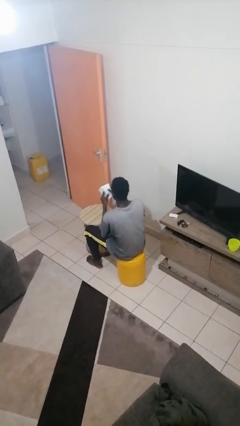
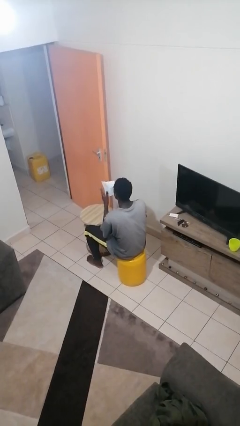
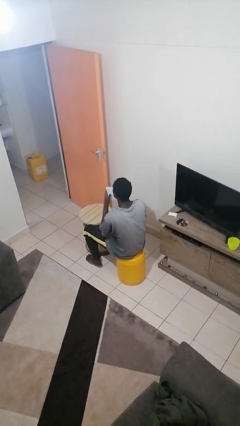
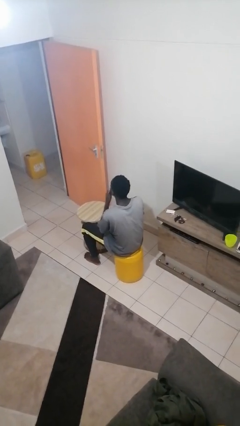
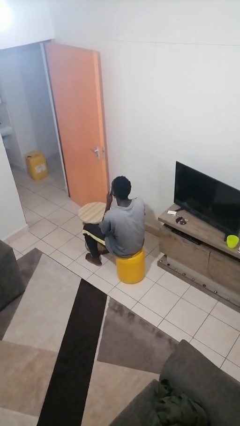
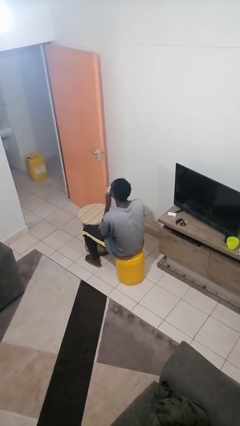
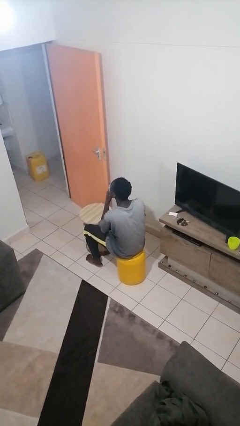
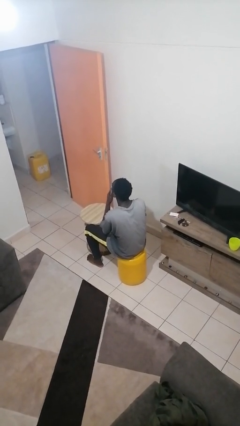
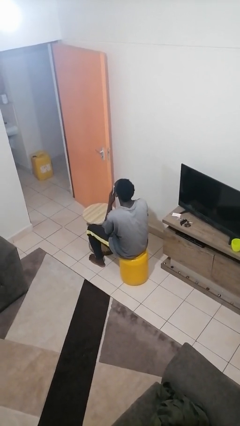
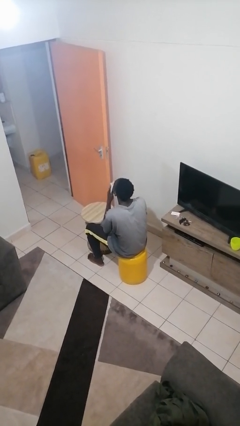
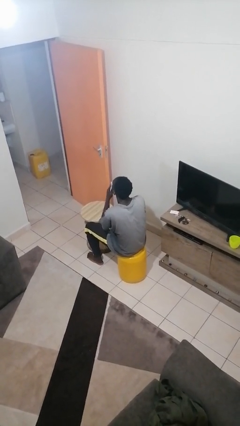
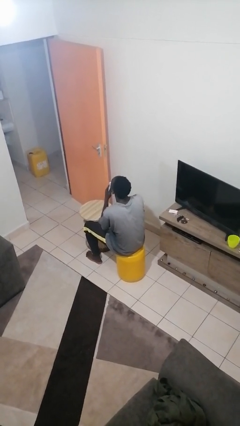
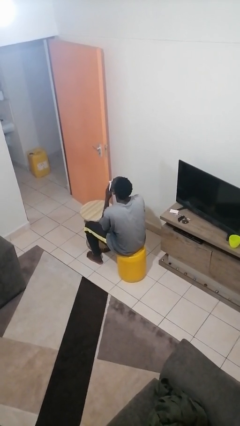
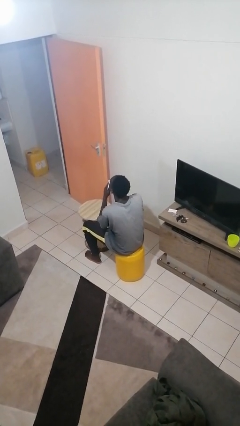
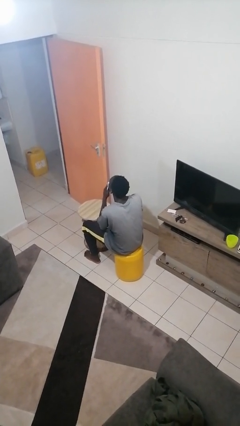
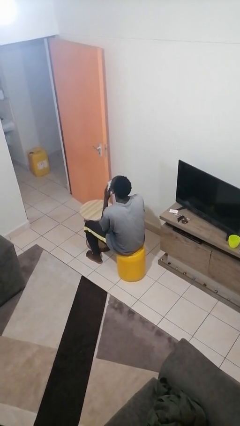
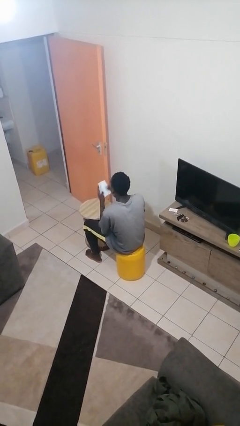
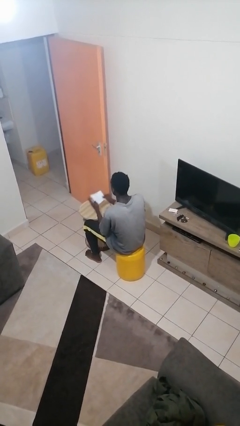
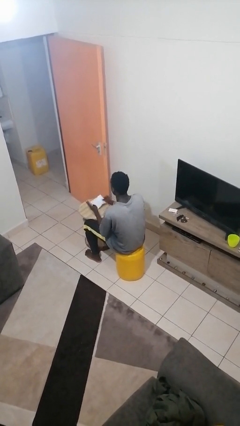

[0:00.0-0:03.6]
person wipes mouth with napkin

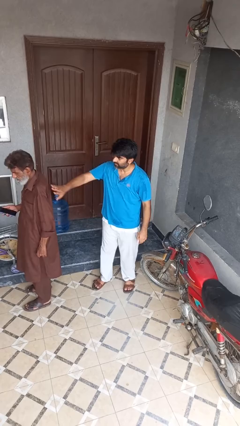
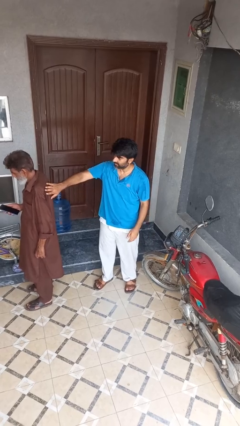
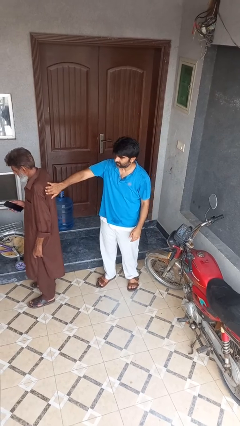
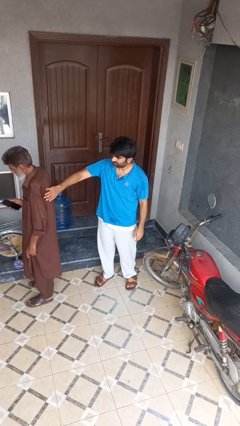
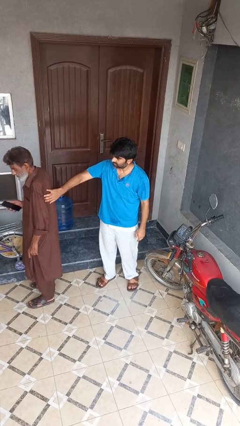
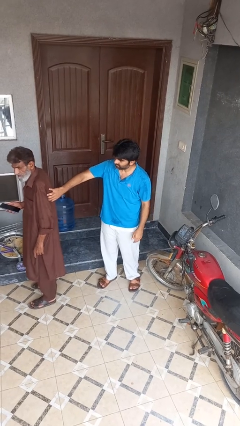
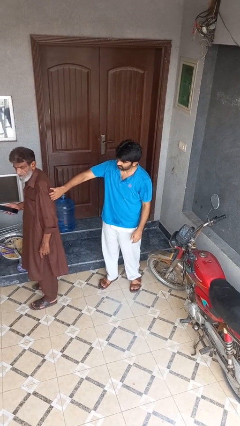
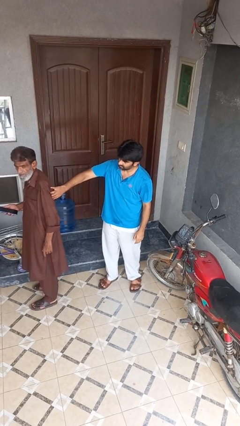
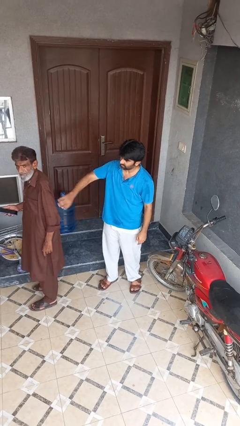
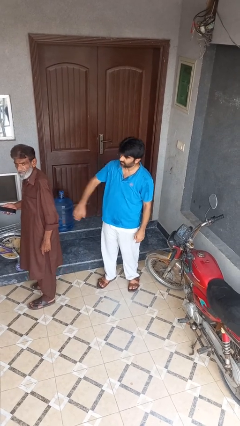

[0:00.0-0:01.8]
person touches back of person

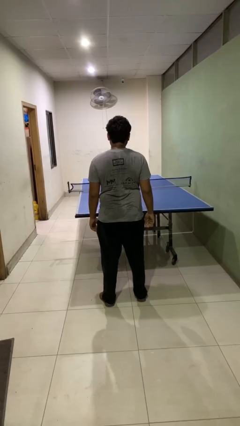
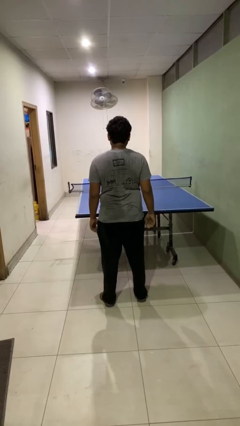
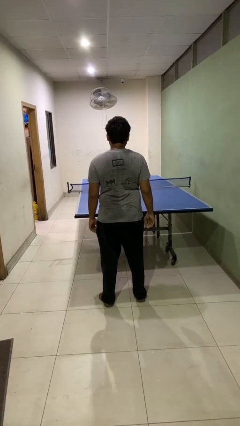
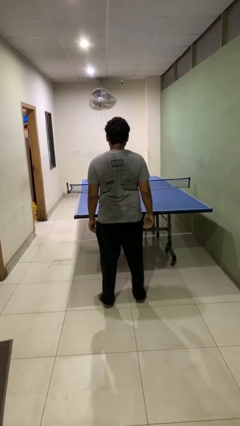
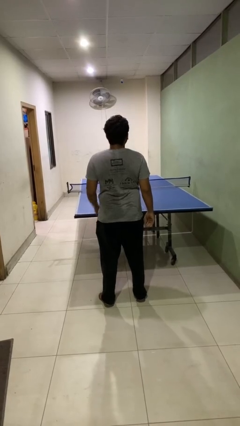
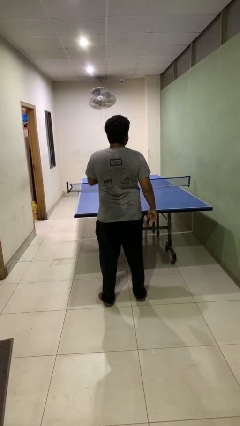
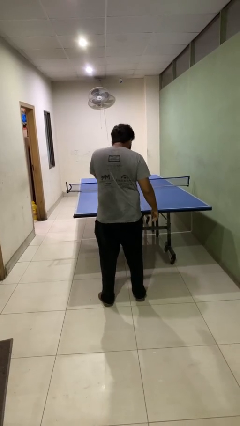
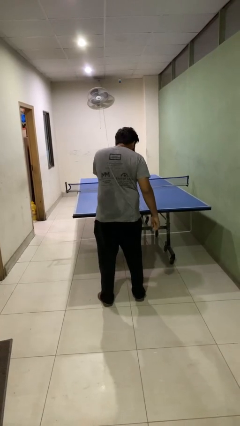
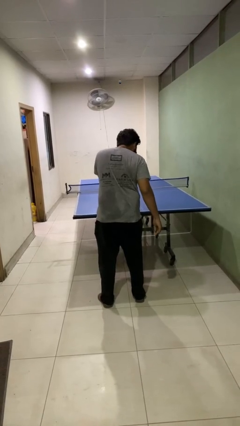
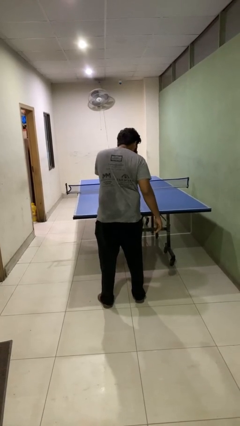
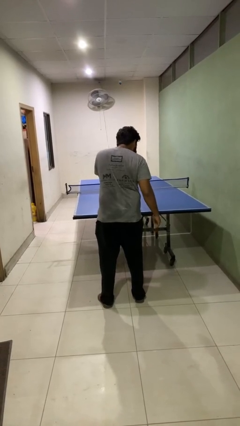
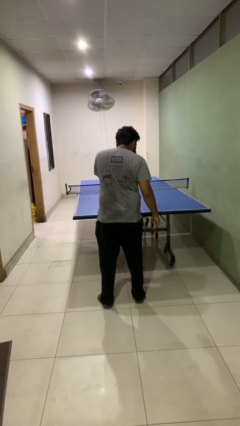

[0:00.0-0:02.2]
person sneezes into hand

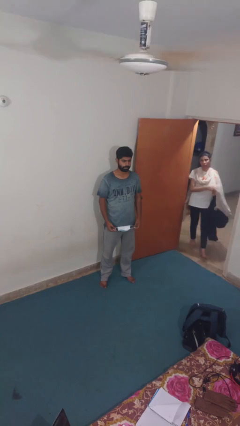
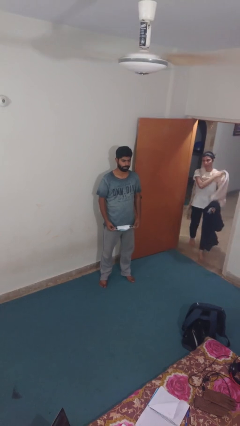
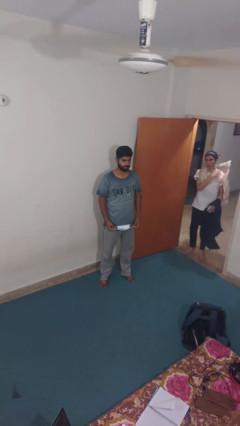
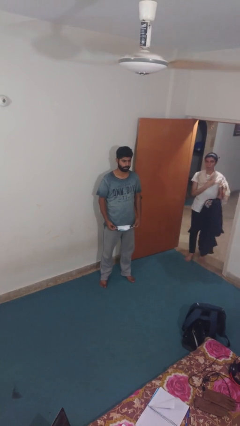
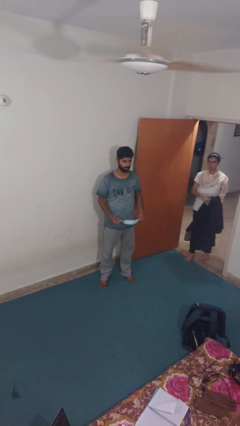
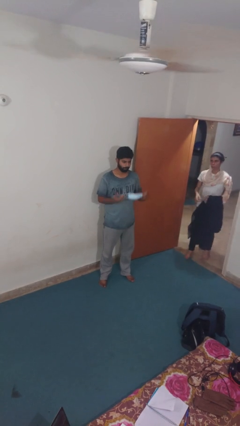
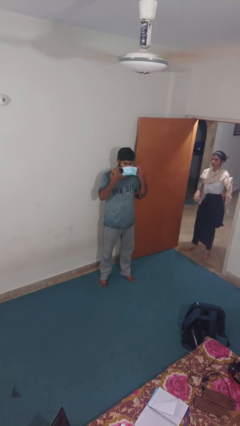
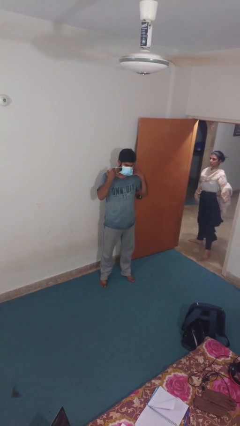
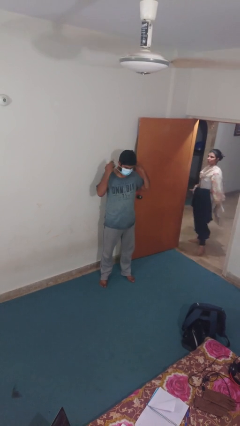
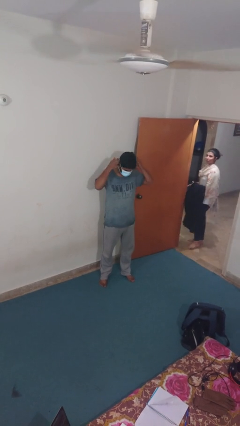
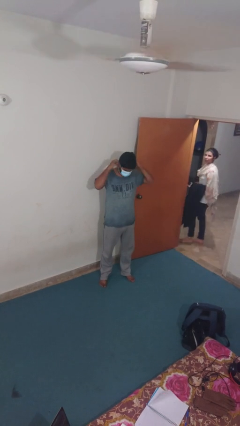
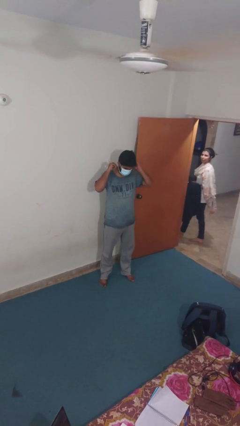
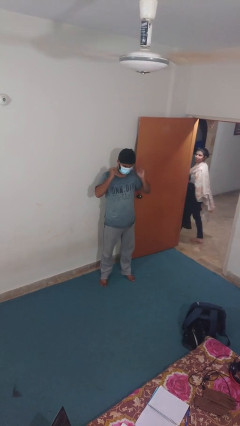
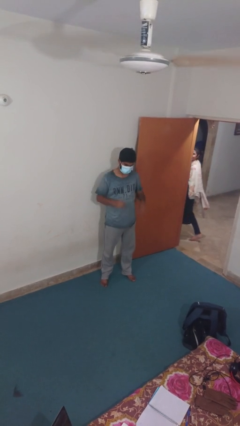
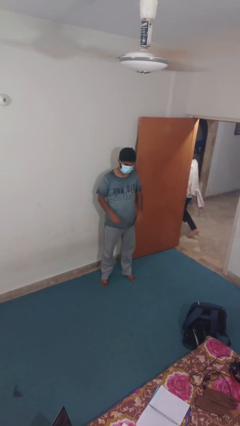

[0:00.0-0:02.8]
person puts on facemask

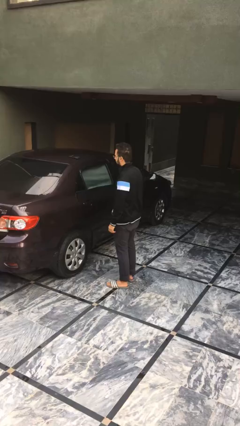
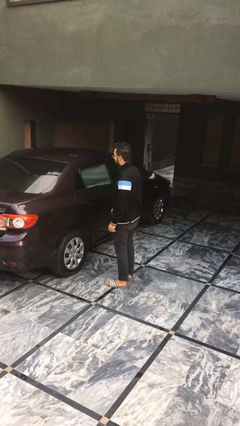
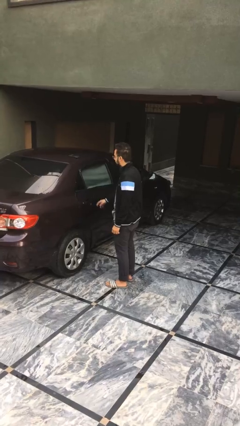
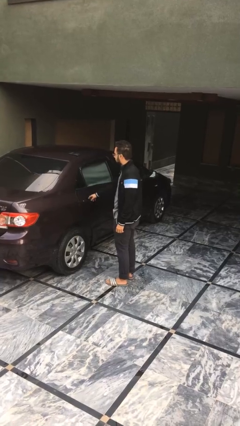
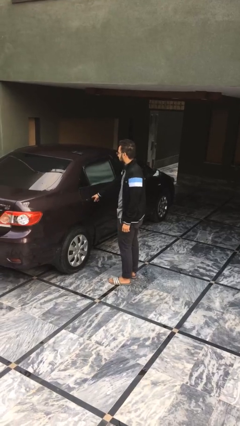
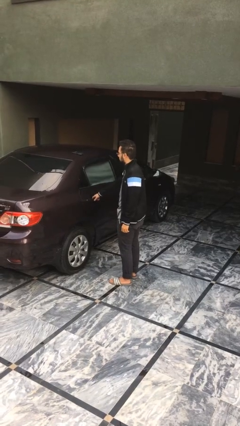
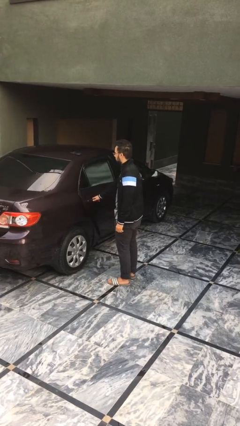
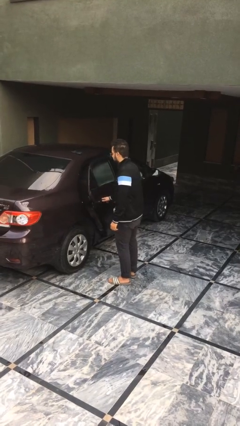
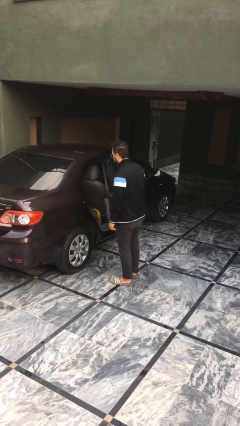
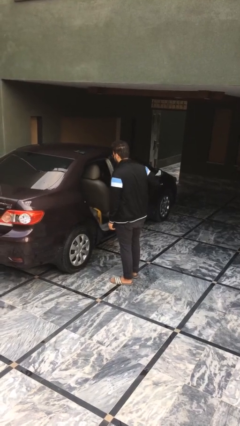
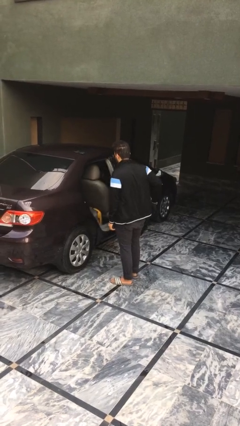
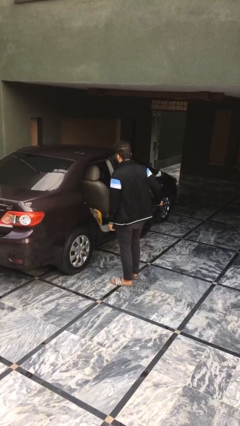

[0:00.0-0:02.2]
person opens car door

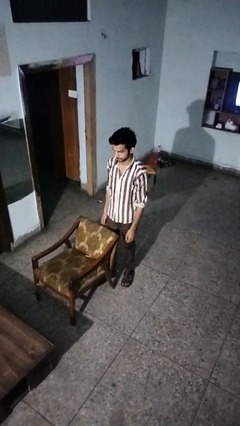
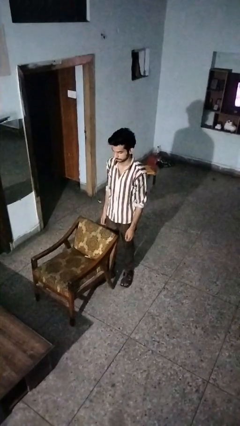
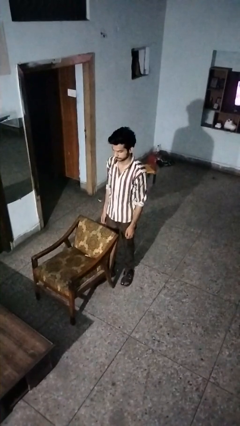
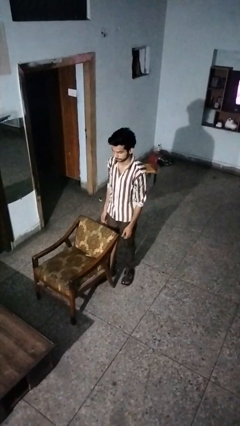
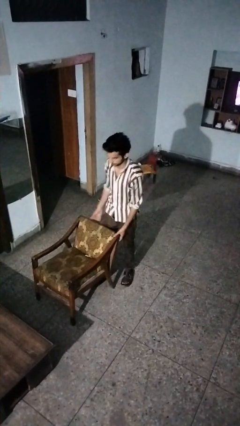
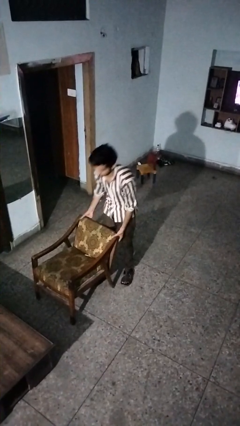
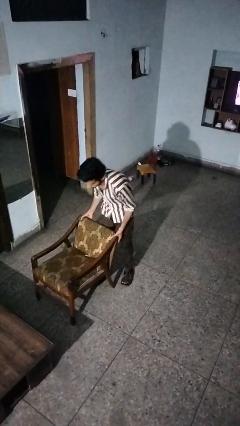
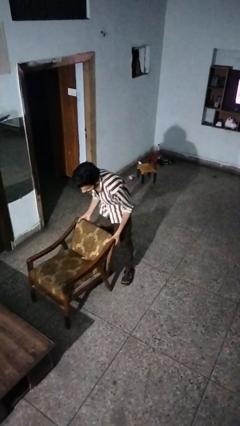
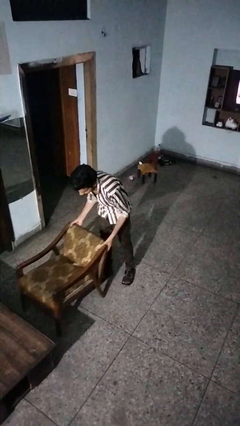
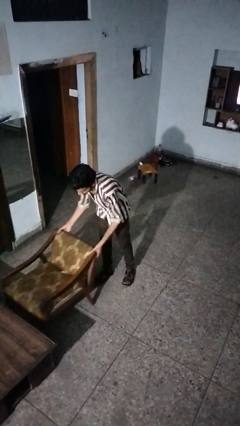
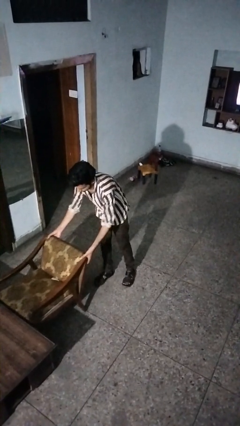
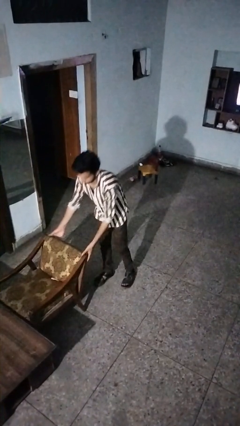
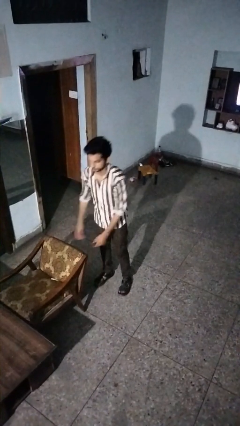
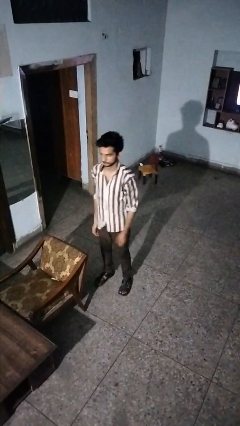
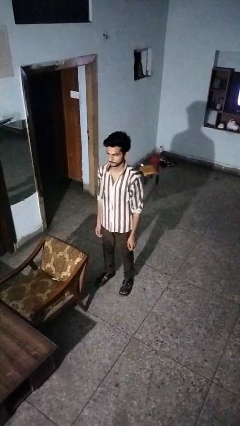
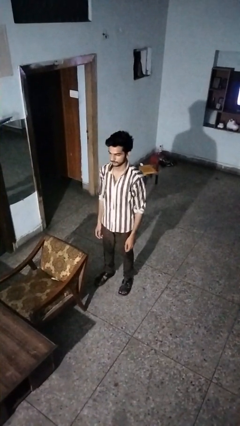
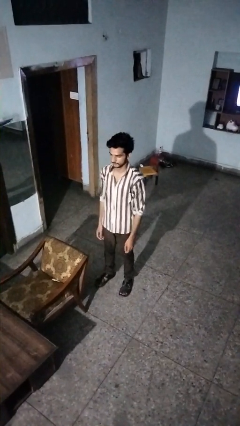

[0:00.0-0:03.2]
person pushes in chair

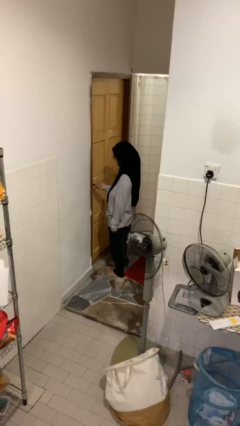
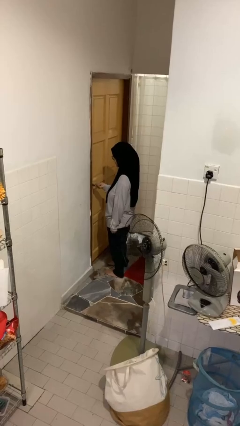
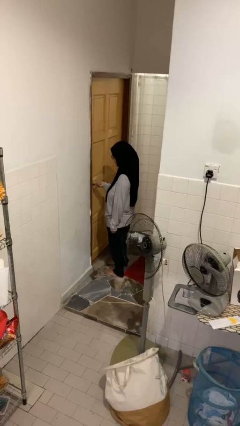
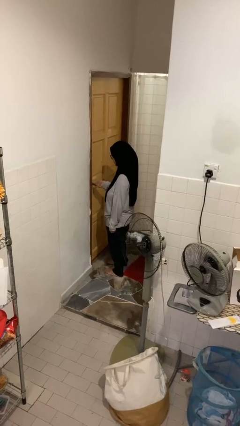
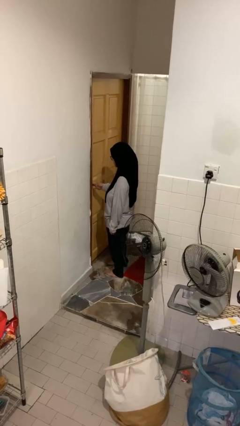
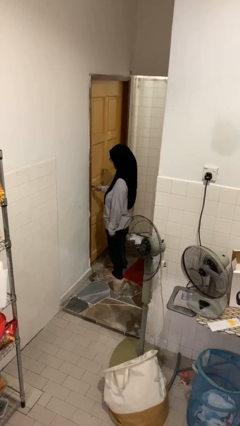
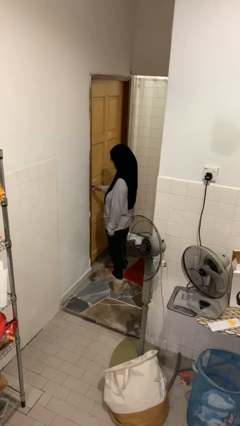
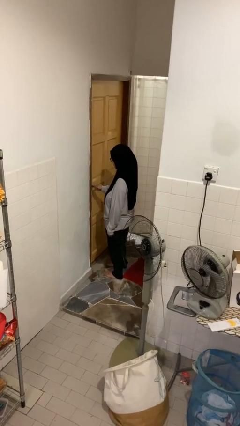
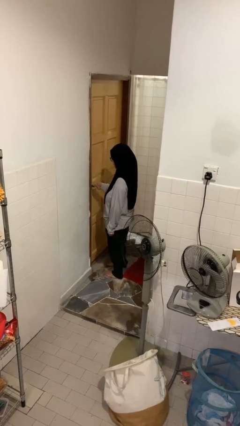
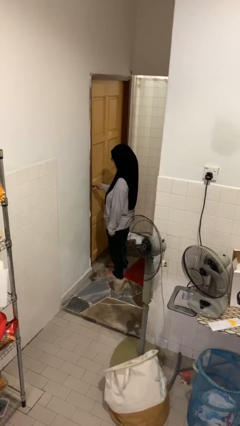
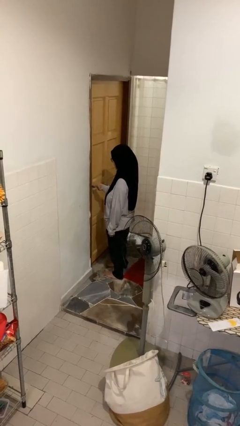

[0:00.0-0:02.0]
person locks door with keys
